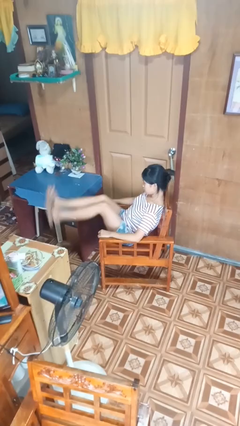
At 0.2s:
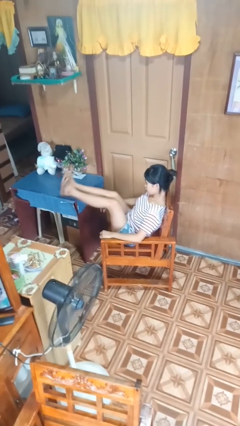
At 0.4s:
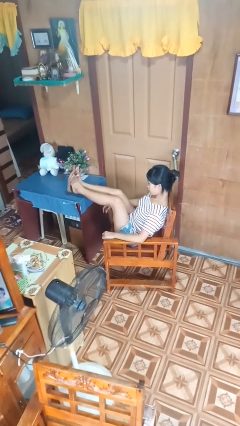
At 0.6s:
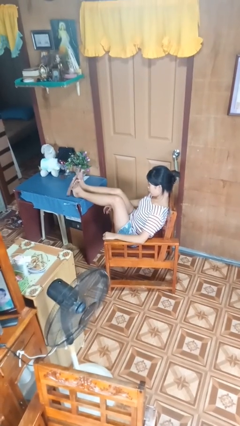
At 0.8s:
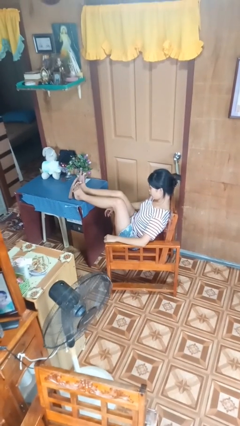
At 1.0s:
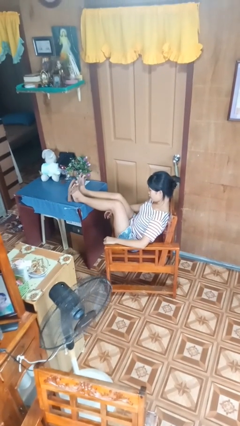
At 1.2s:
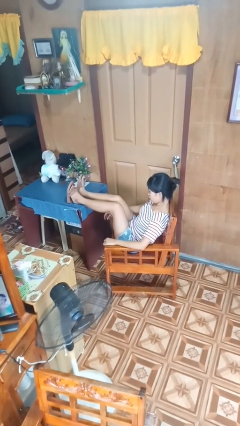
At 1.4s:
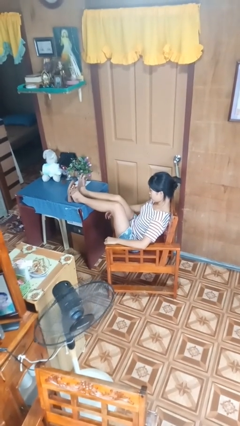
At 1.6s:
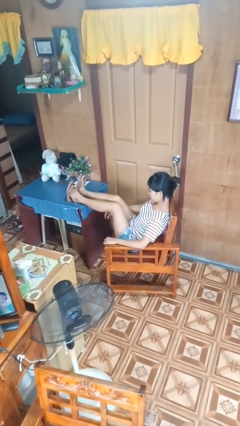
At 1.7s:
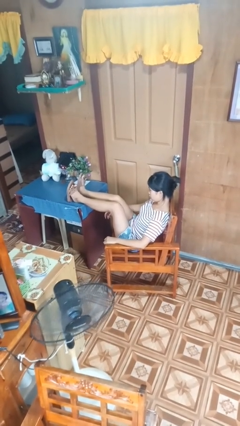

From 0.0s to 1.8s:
person puts feet up

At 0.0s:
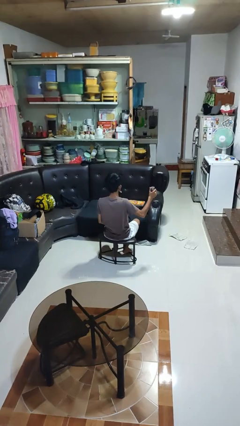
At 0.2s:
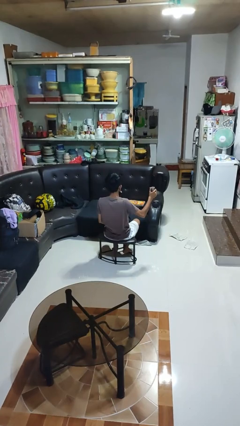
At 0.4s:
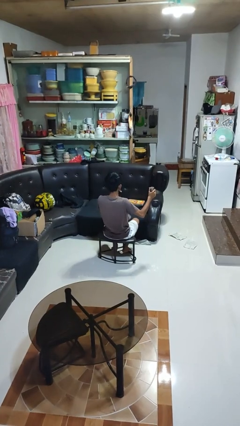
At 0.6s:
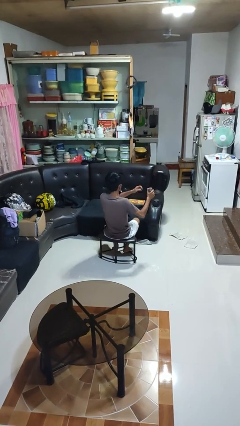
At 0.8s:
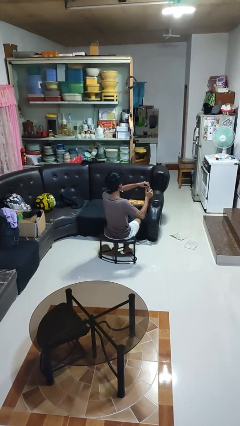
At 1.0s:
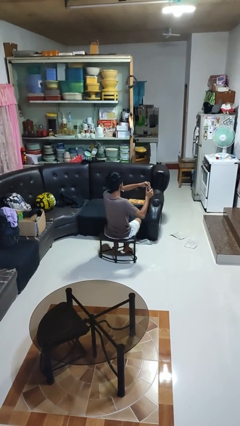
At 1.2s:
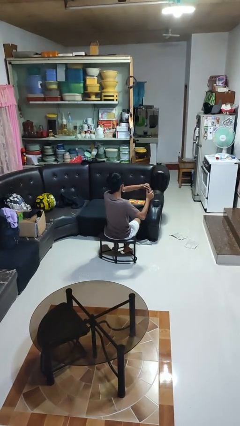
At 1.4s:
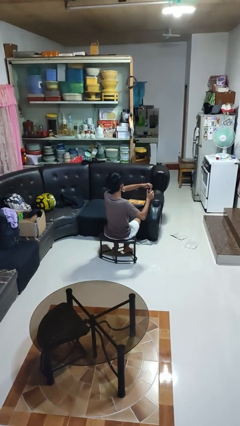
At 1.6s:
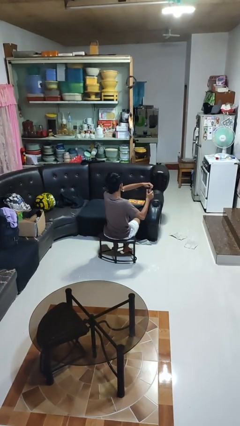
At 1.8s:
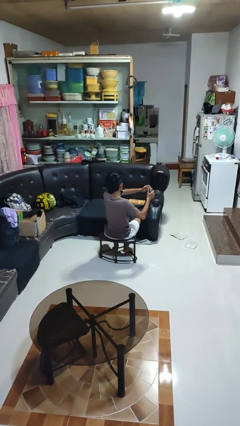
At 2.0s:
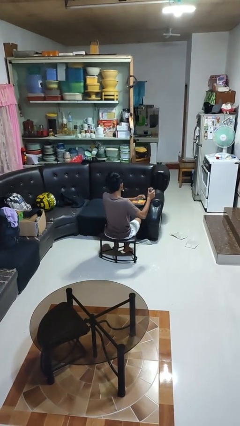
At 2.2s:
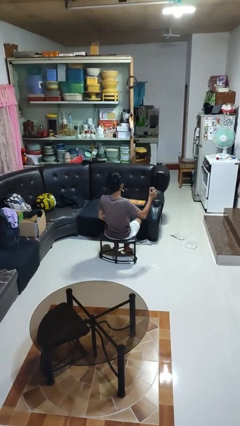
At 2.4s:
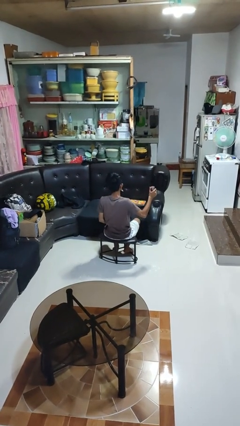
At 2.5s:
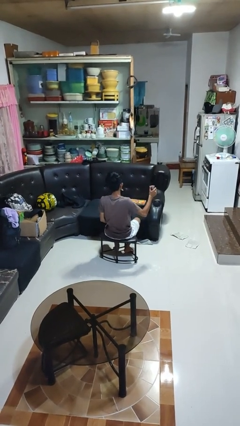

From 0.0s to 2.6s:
person opens beverage can

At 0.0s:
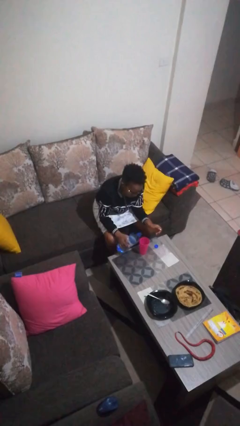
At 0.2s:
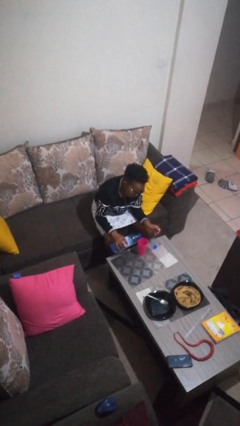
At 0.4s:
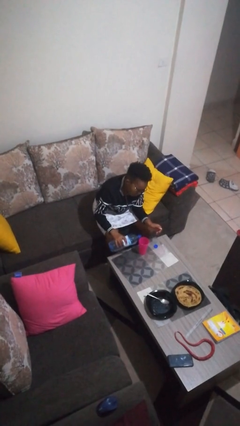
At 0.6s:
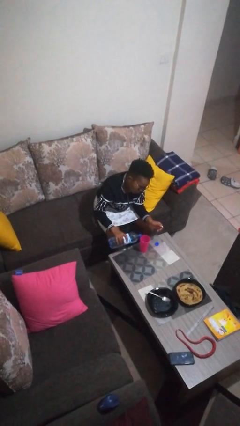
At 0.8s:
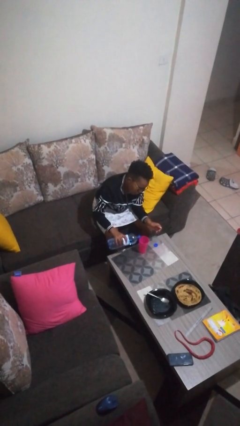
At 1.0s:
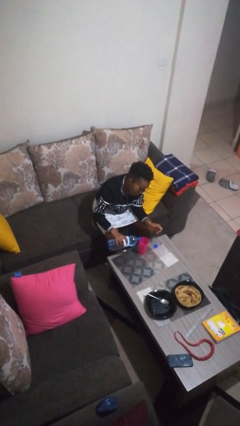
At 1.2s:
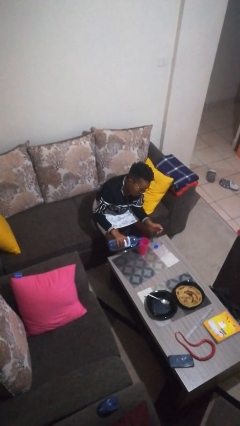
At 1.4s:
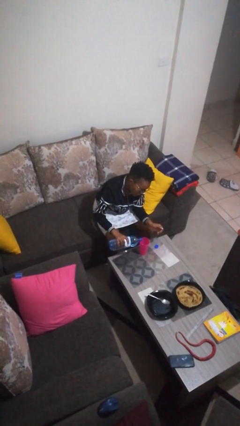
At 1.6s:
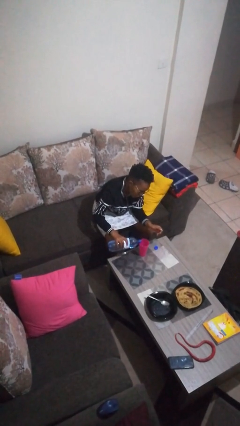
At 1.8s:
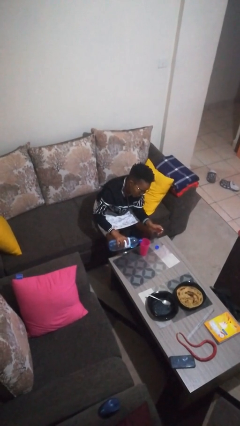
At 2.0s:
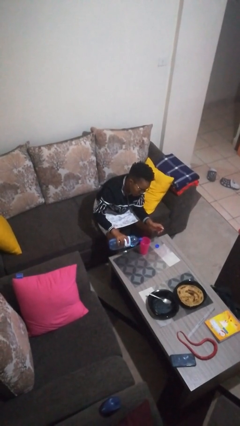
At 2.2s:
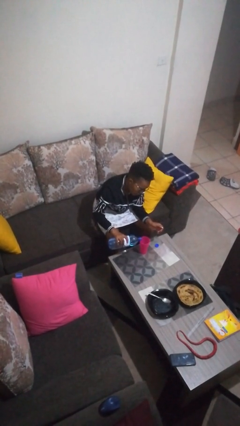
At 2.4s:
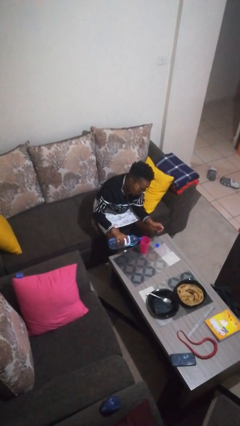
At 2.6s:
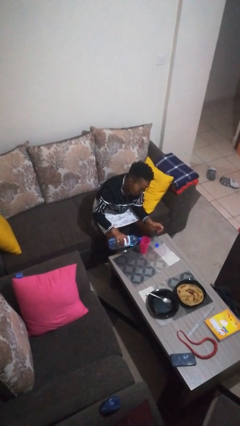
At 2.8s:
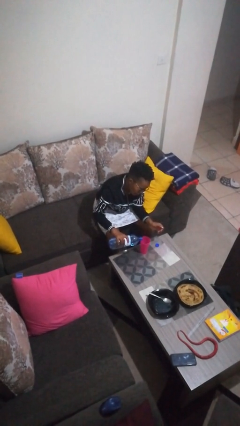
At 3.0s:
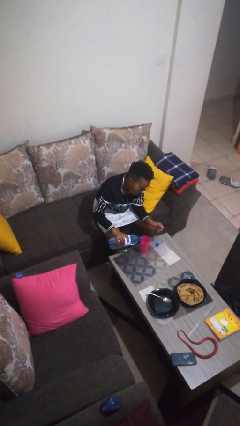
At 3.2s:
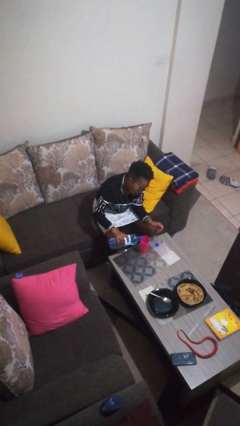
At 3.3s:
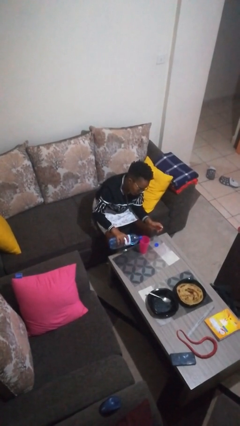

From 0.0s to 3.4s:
person pours liquid into cup

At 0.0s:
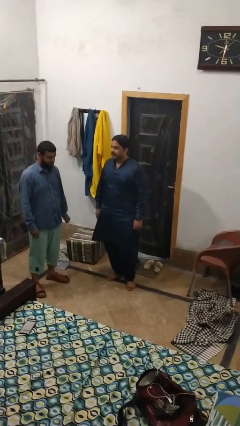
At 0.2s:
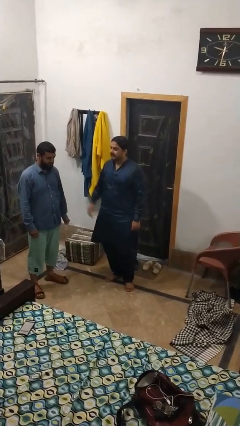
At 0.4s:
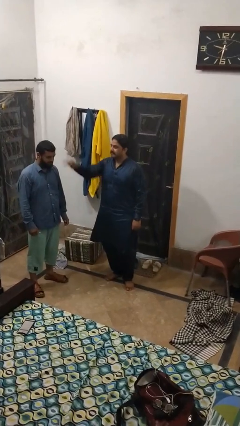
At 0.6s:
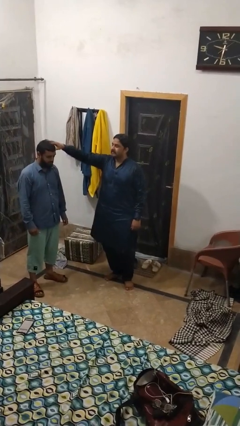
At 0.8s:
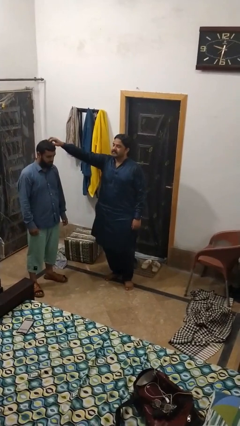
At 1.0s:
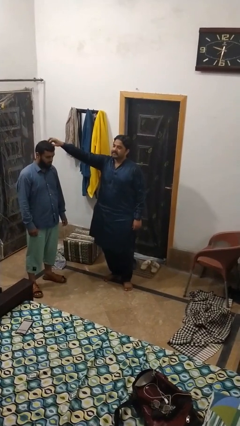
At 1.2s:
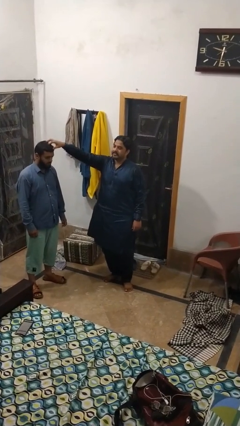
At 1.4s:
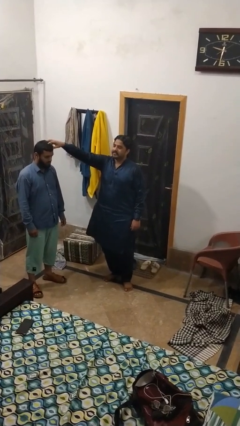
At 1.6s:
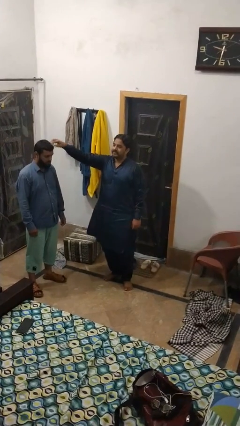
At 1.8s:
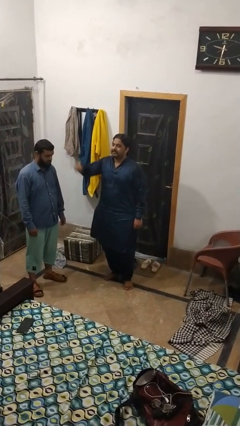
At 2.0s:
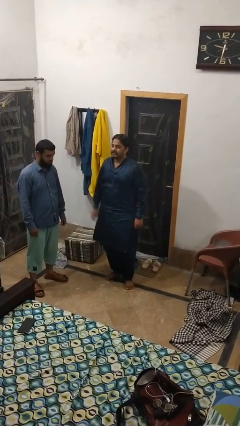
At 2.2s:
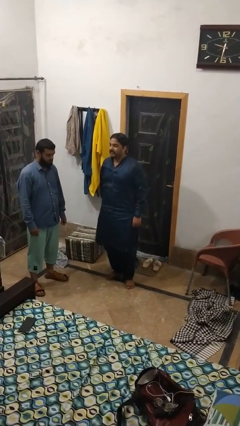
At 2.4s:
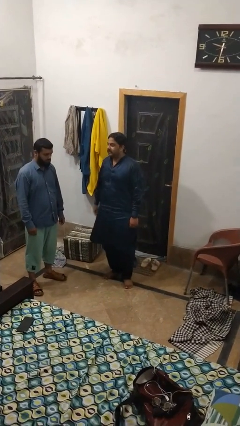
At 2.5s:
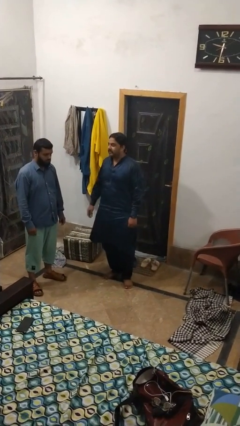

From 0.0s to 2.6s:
person grabs person by hair

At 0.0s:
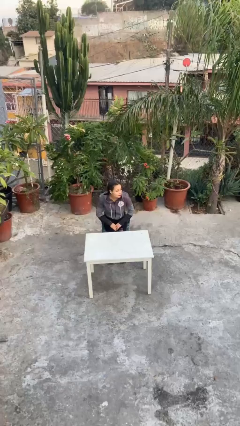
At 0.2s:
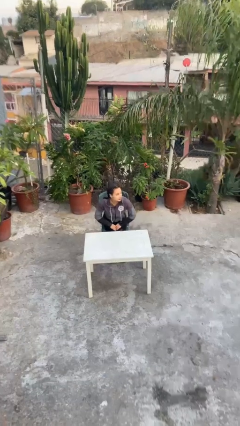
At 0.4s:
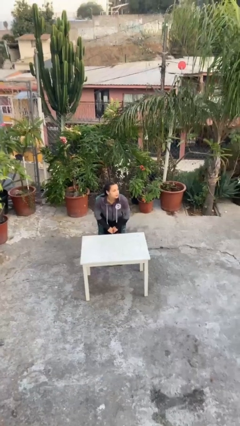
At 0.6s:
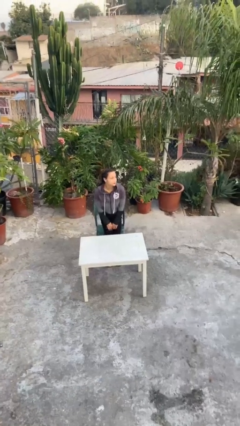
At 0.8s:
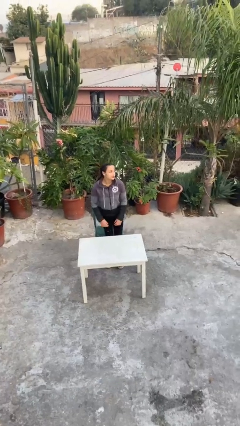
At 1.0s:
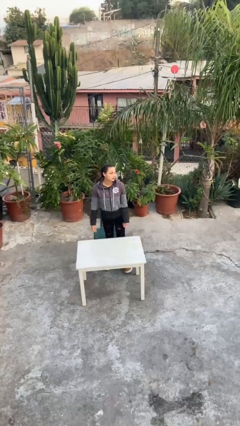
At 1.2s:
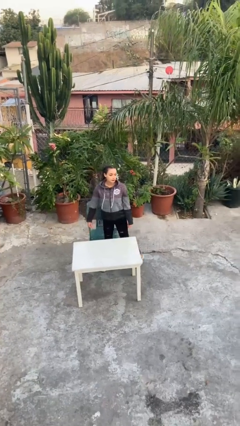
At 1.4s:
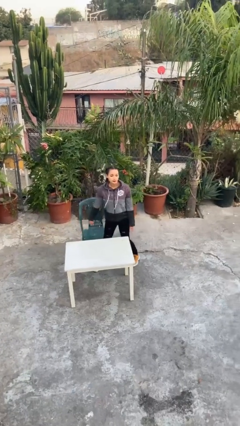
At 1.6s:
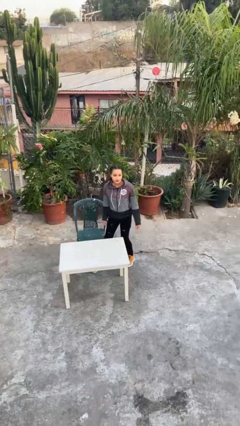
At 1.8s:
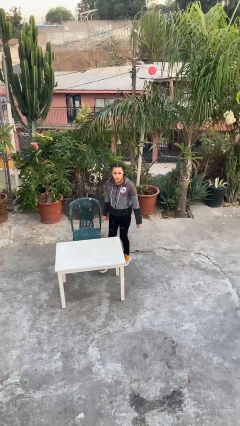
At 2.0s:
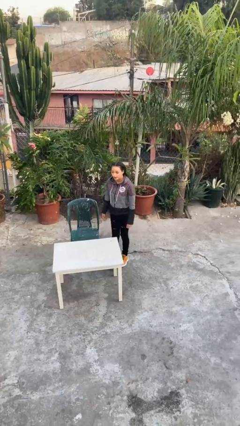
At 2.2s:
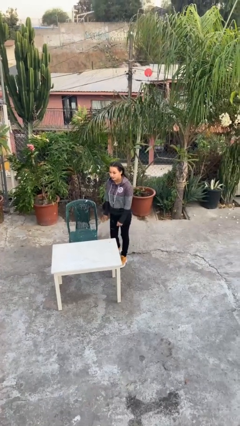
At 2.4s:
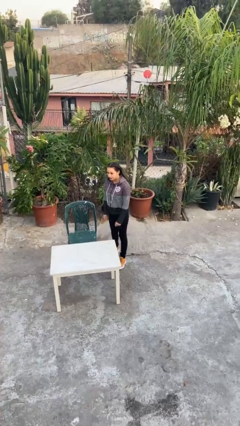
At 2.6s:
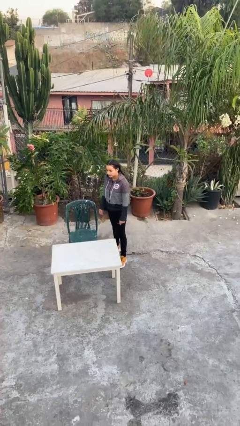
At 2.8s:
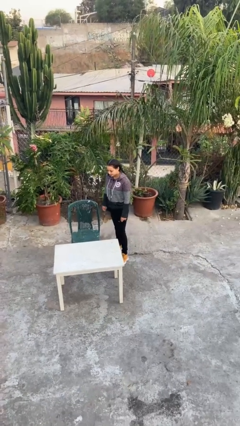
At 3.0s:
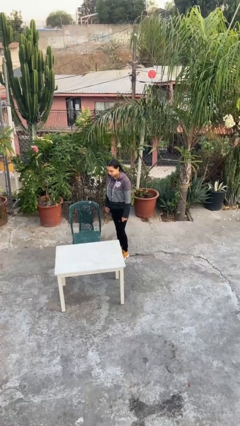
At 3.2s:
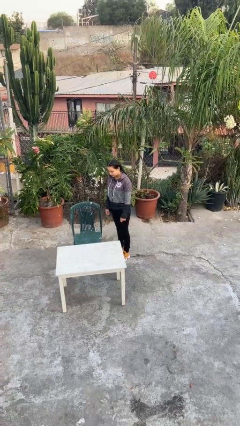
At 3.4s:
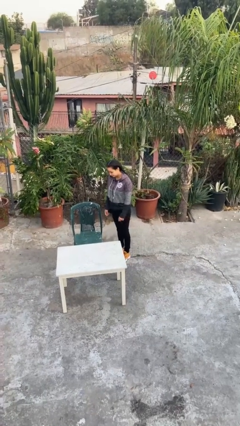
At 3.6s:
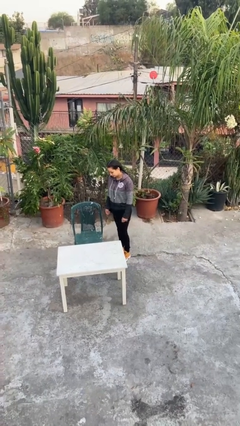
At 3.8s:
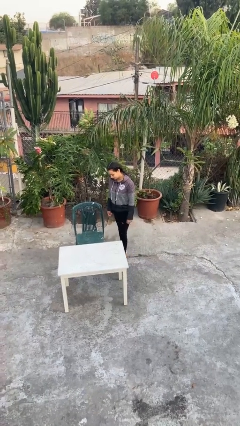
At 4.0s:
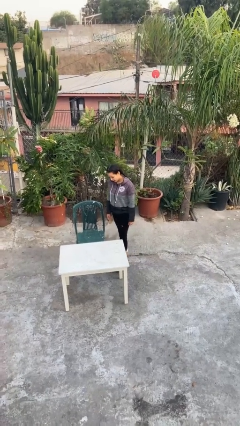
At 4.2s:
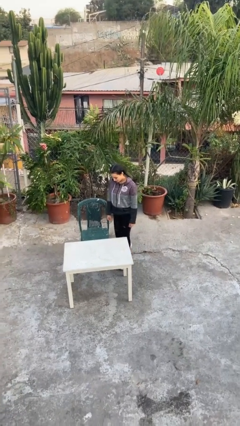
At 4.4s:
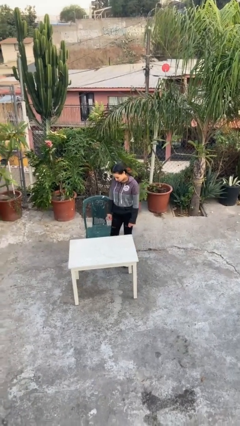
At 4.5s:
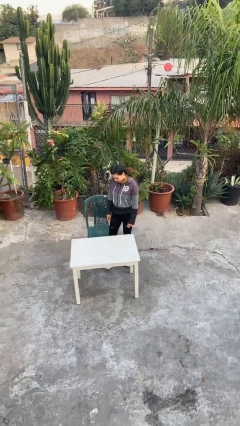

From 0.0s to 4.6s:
person stands up

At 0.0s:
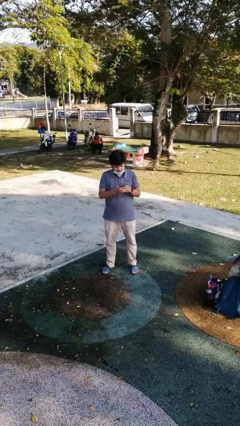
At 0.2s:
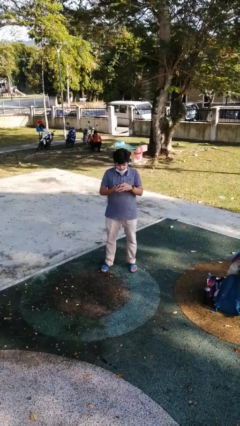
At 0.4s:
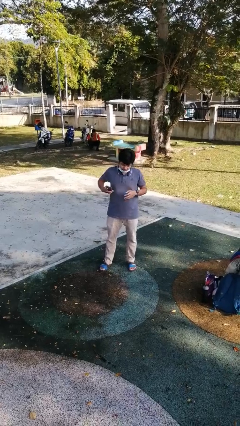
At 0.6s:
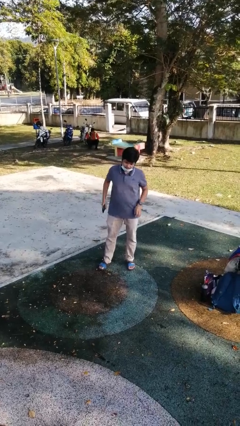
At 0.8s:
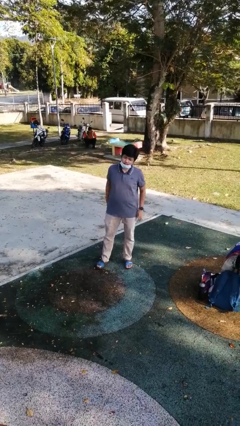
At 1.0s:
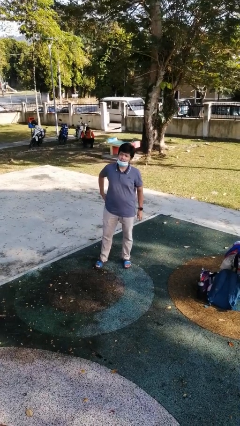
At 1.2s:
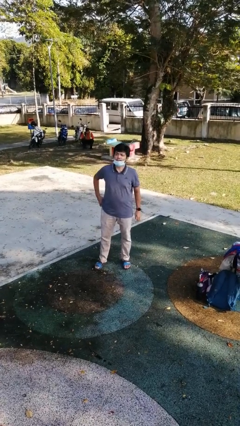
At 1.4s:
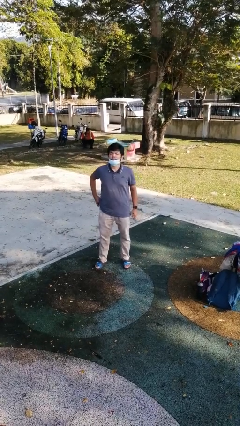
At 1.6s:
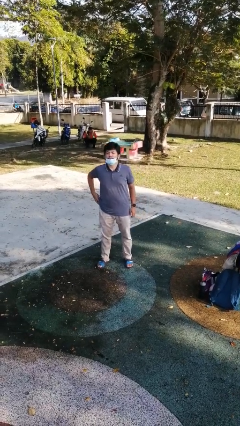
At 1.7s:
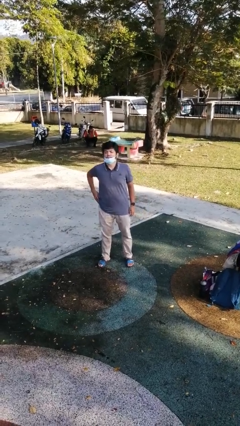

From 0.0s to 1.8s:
person puts phone into pocket

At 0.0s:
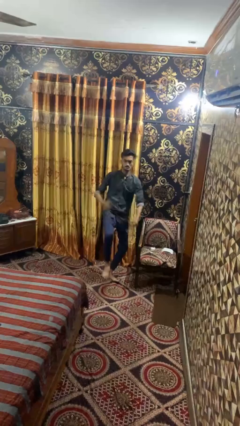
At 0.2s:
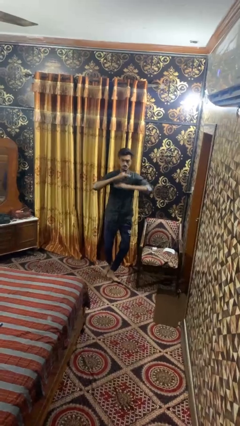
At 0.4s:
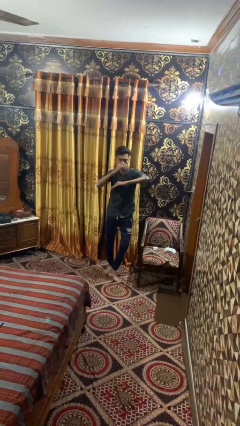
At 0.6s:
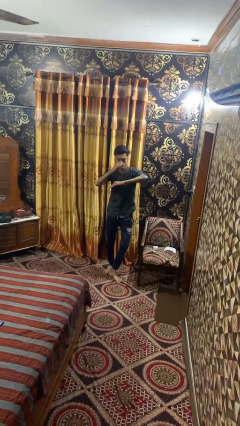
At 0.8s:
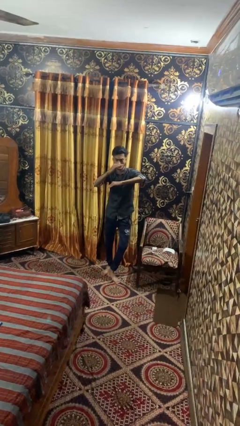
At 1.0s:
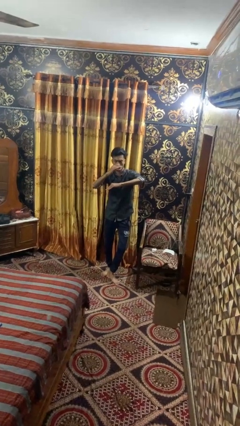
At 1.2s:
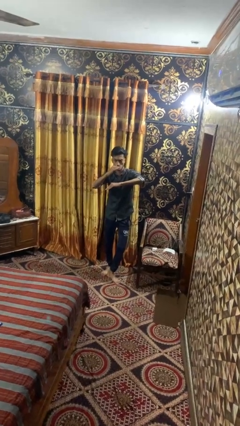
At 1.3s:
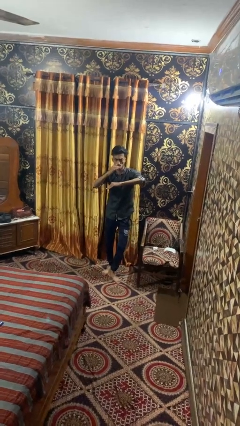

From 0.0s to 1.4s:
person karate chop
